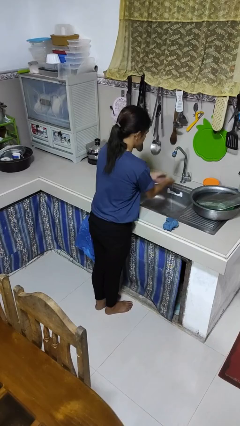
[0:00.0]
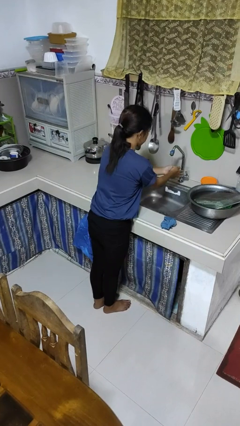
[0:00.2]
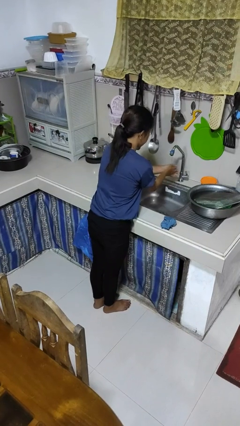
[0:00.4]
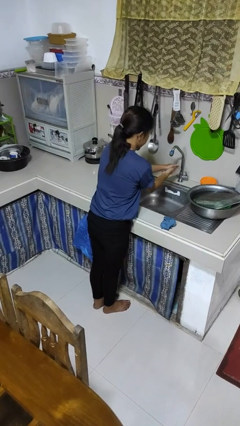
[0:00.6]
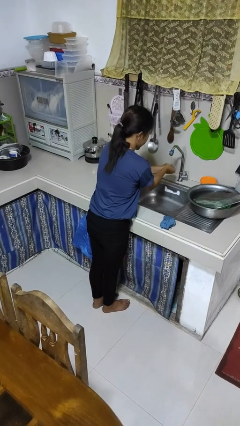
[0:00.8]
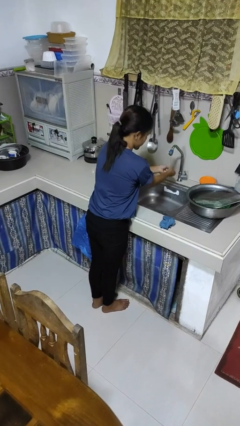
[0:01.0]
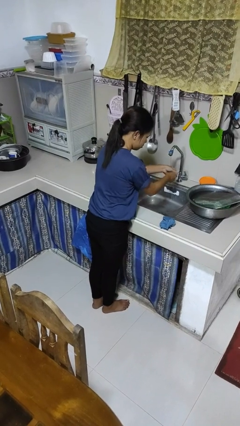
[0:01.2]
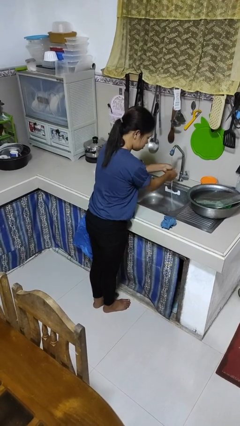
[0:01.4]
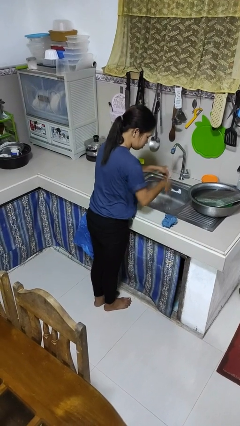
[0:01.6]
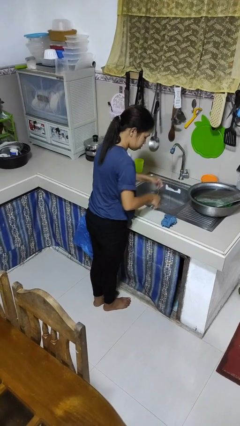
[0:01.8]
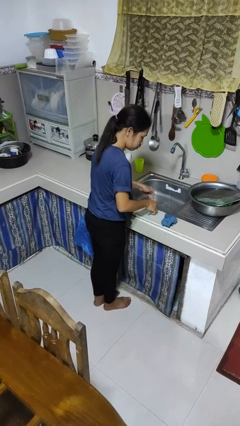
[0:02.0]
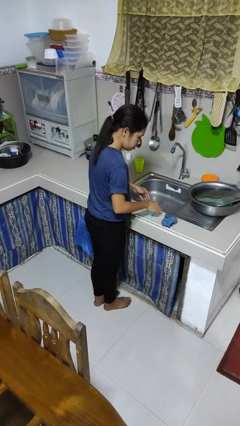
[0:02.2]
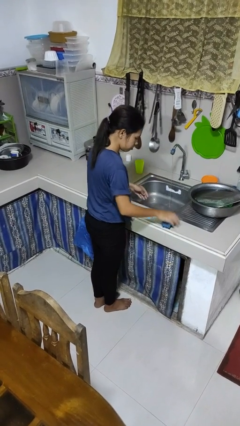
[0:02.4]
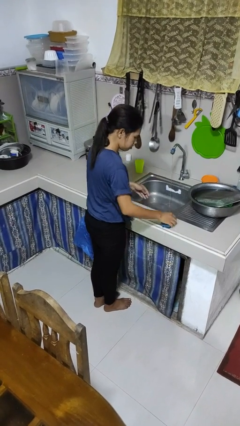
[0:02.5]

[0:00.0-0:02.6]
person washes hands

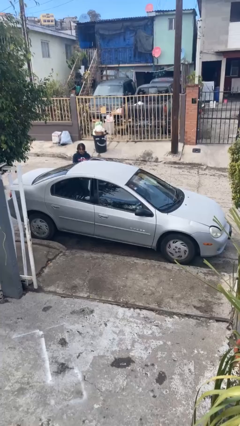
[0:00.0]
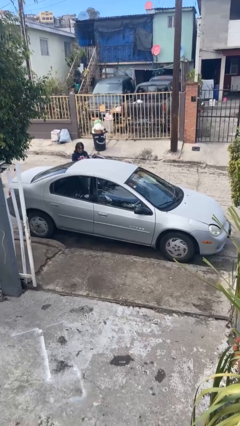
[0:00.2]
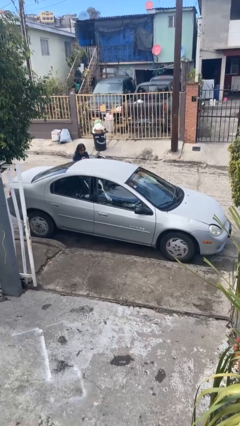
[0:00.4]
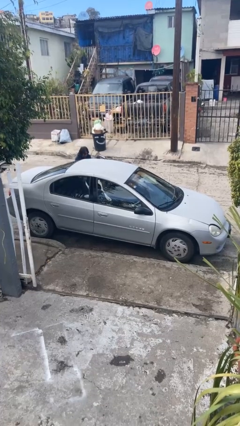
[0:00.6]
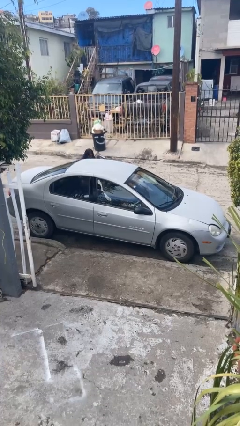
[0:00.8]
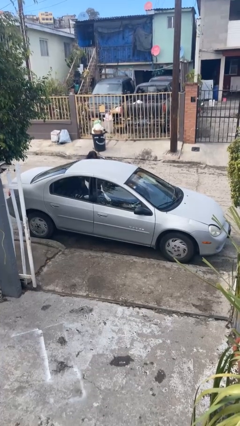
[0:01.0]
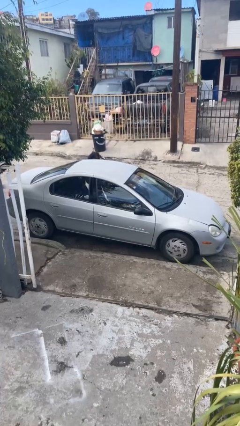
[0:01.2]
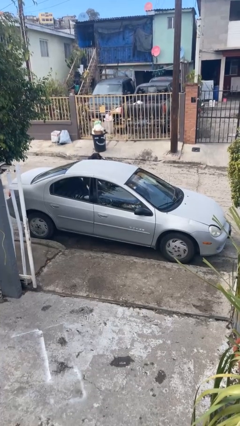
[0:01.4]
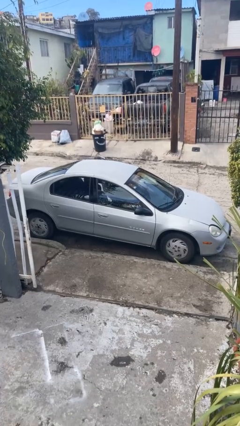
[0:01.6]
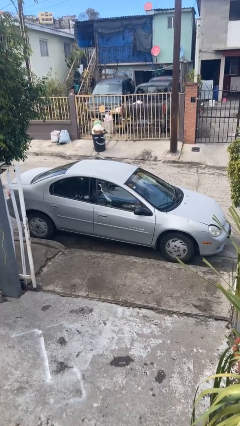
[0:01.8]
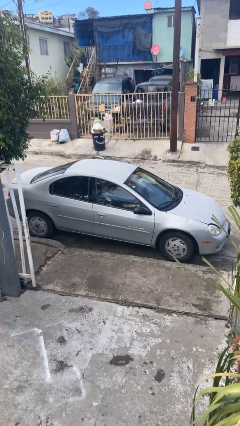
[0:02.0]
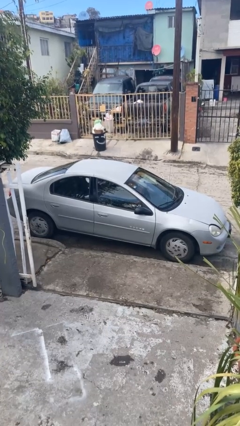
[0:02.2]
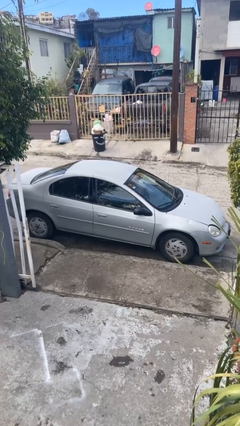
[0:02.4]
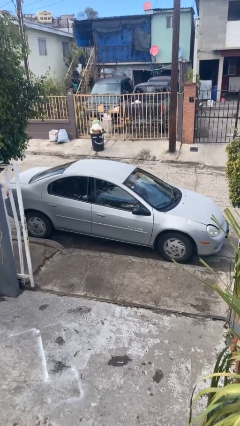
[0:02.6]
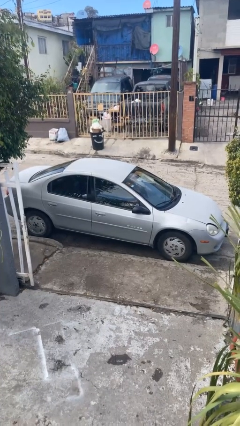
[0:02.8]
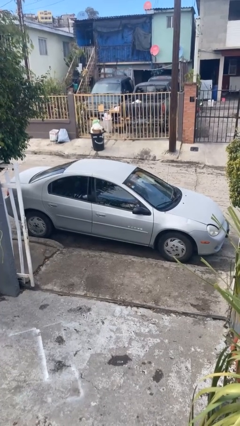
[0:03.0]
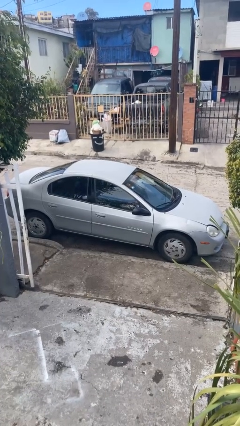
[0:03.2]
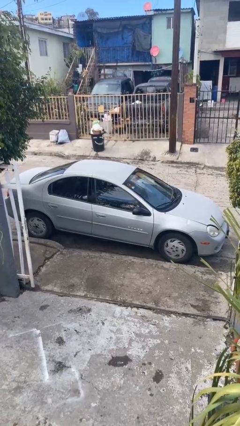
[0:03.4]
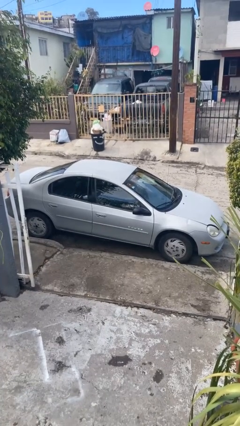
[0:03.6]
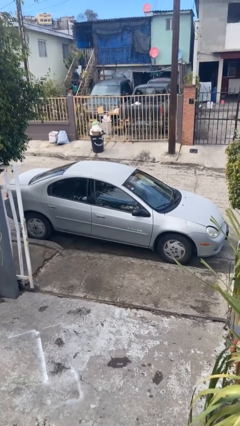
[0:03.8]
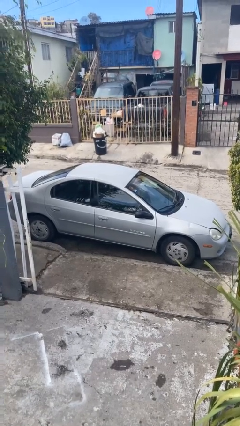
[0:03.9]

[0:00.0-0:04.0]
car picks up person

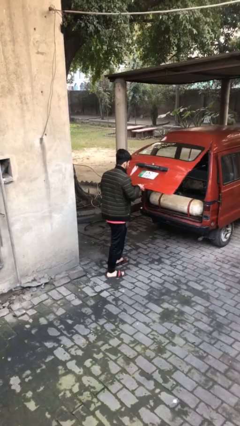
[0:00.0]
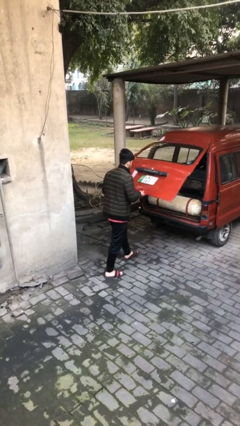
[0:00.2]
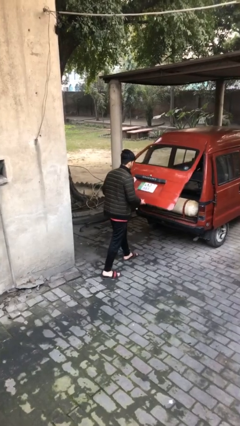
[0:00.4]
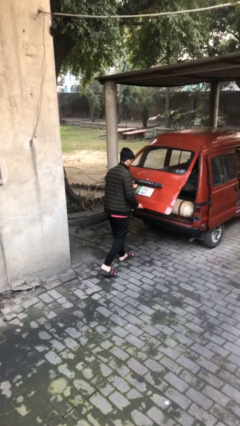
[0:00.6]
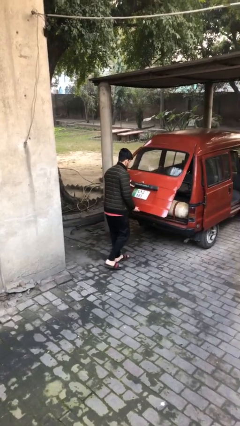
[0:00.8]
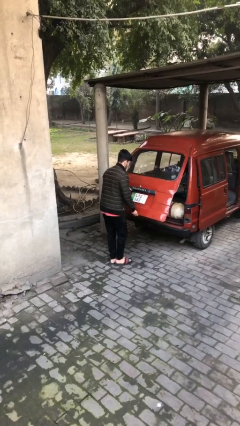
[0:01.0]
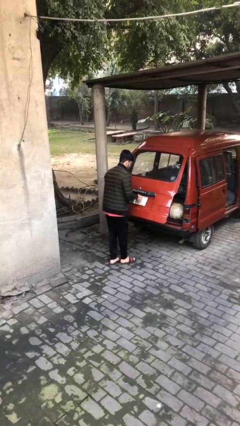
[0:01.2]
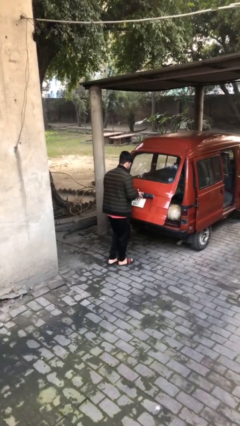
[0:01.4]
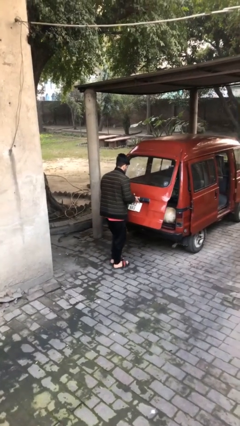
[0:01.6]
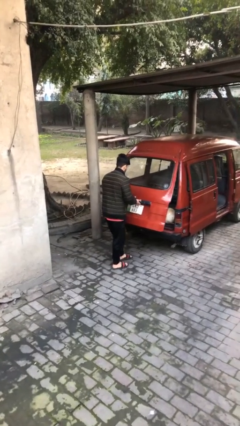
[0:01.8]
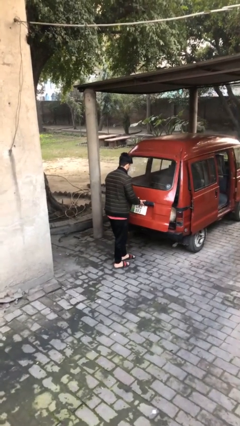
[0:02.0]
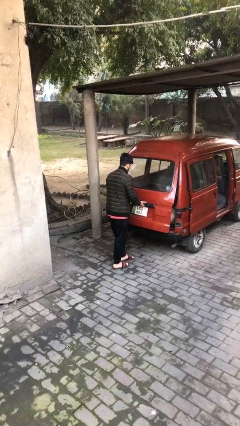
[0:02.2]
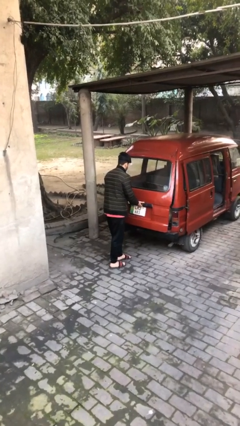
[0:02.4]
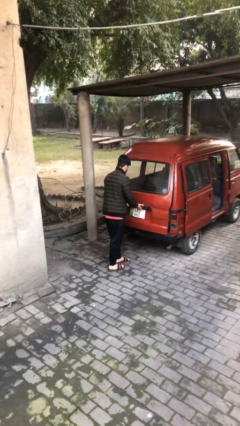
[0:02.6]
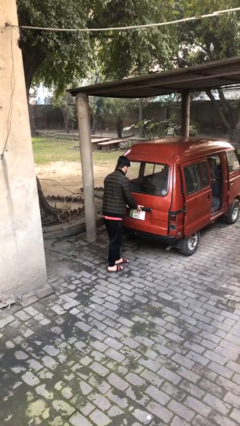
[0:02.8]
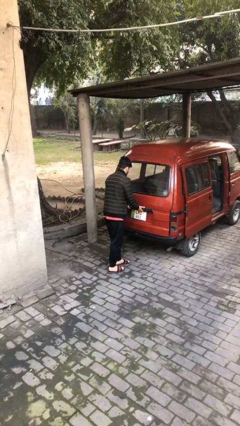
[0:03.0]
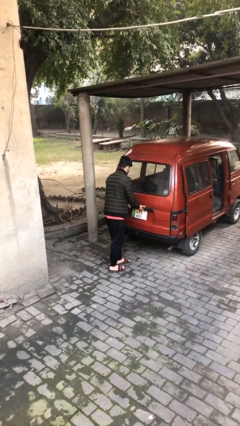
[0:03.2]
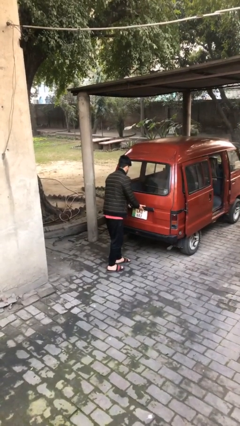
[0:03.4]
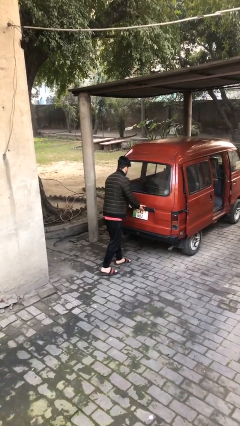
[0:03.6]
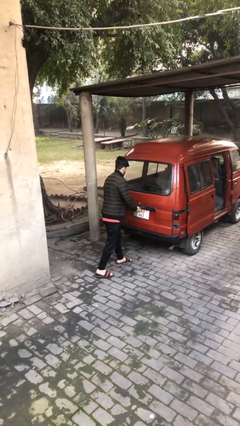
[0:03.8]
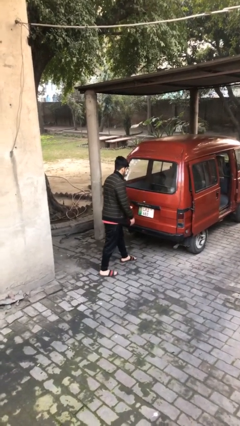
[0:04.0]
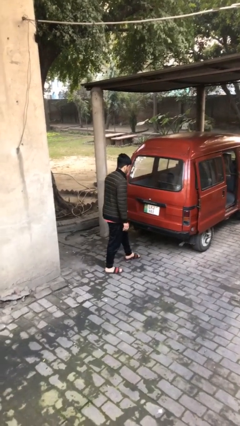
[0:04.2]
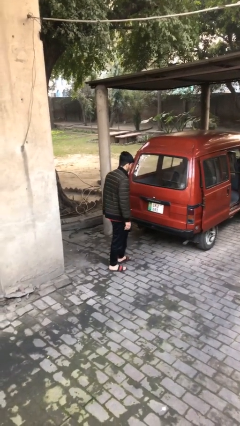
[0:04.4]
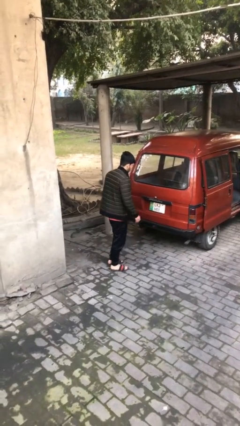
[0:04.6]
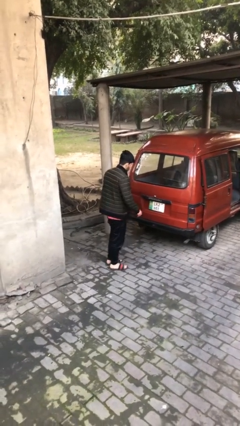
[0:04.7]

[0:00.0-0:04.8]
person closes car trunk

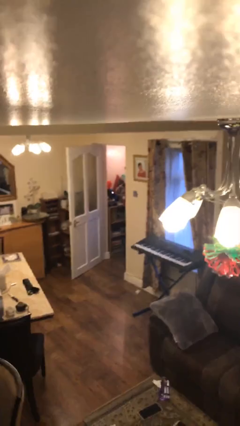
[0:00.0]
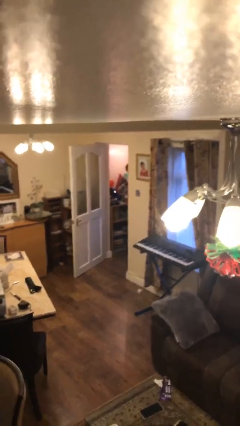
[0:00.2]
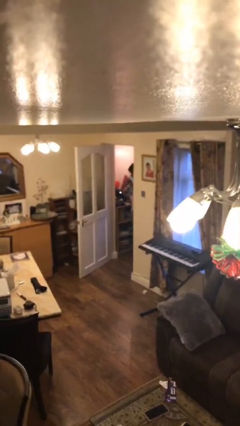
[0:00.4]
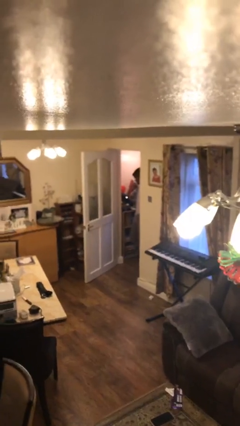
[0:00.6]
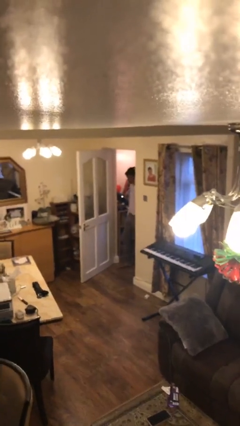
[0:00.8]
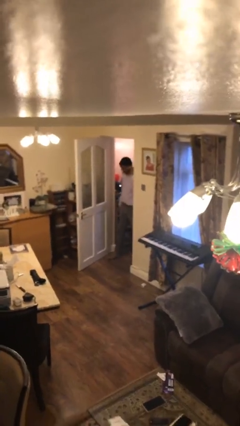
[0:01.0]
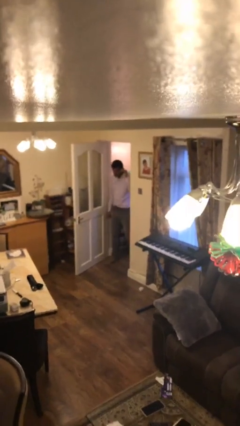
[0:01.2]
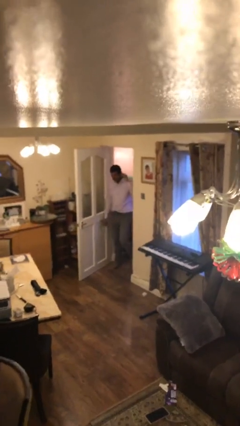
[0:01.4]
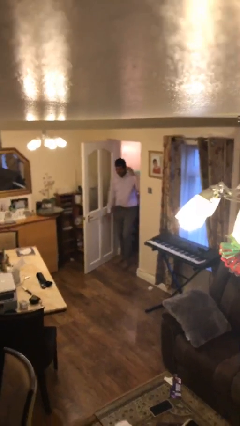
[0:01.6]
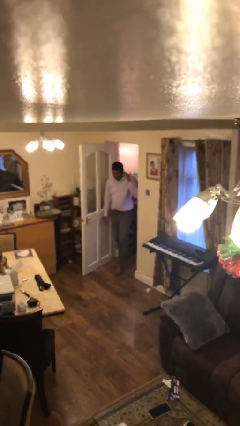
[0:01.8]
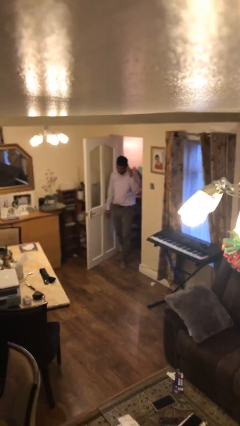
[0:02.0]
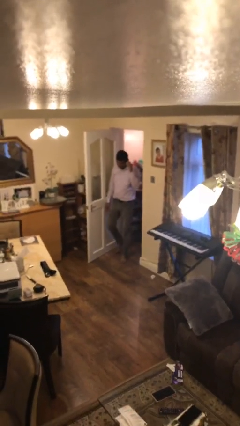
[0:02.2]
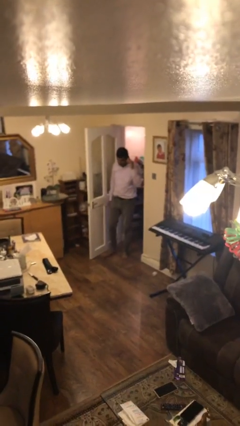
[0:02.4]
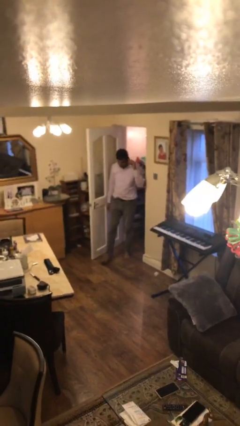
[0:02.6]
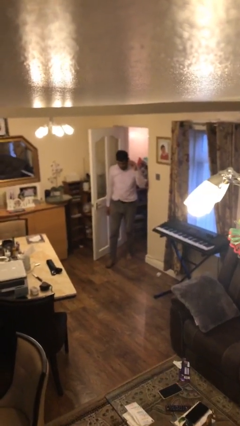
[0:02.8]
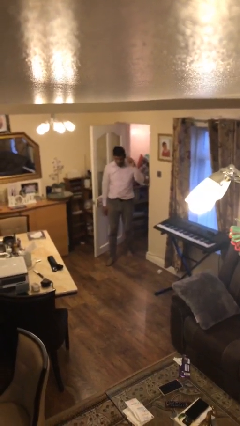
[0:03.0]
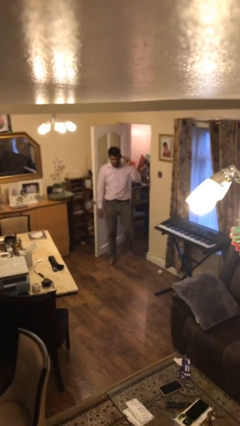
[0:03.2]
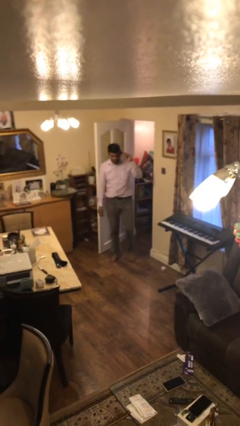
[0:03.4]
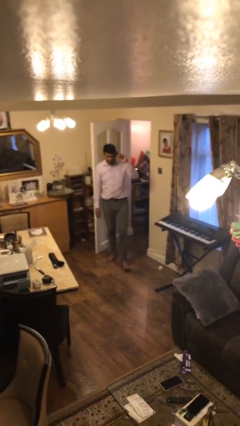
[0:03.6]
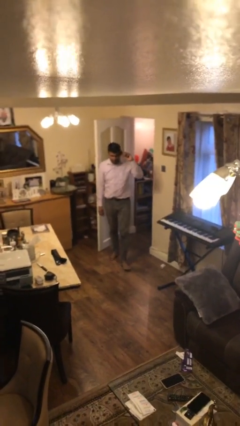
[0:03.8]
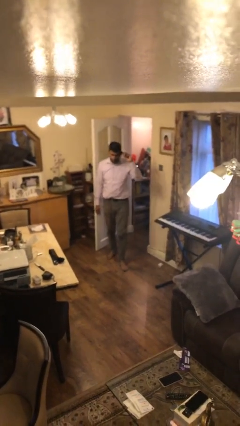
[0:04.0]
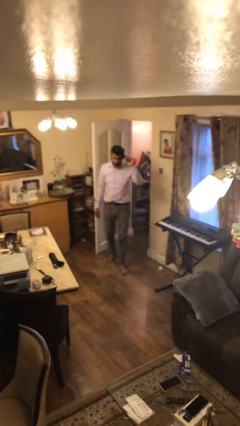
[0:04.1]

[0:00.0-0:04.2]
person enters scene through structure

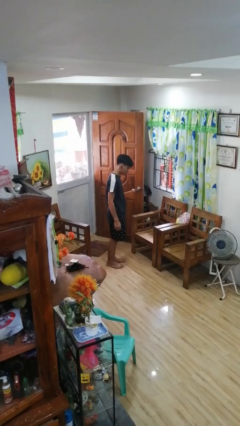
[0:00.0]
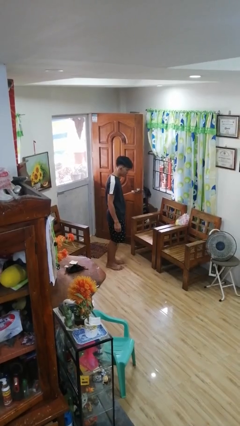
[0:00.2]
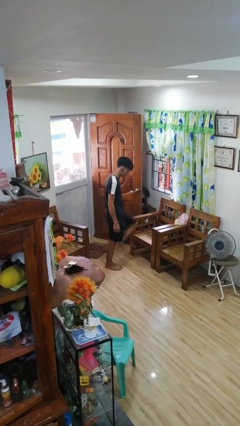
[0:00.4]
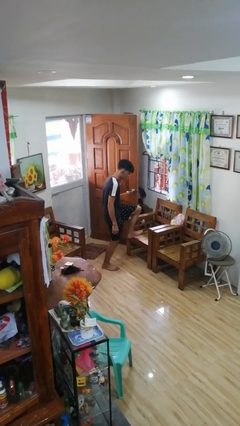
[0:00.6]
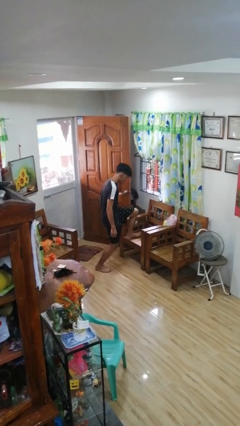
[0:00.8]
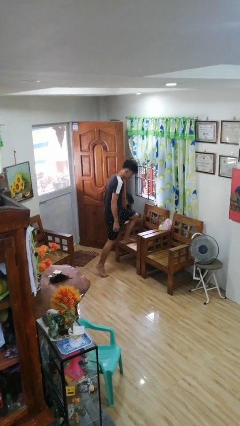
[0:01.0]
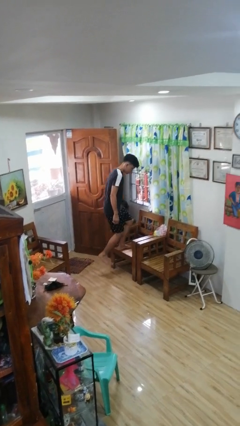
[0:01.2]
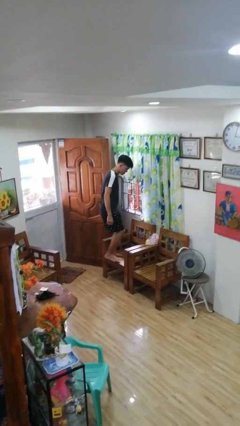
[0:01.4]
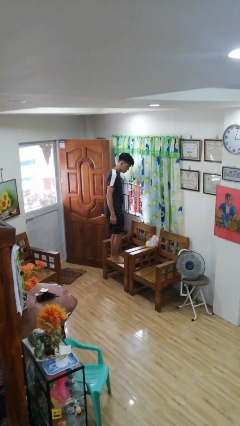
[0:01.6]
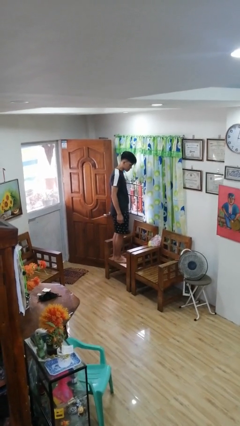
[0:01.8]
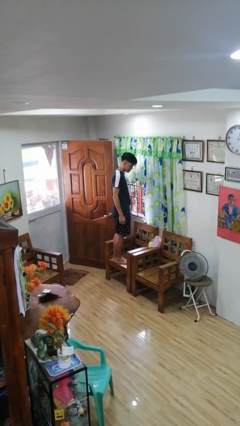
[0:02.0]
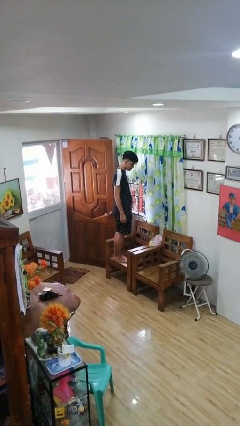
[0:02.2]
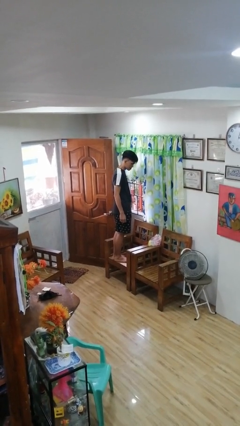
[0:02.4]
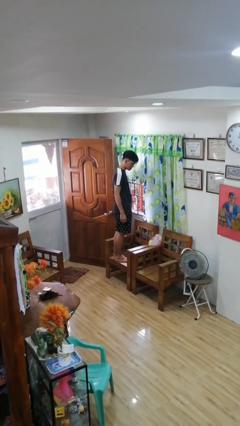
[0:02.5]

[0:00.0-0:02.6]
person climbs on chair
